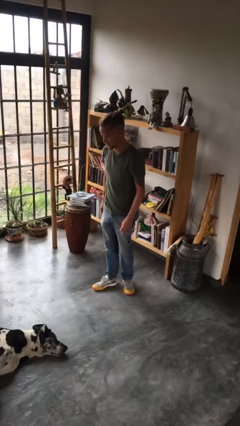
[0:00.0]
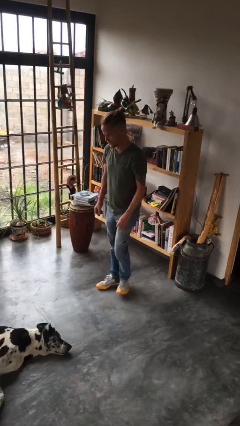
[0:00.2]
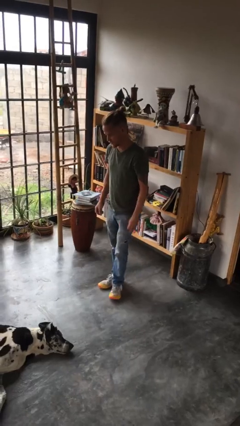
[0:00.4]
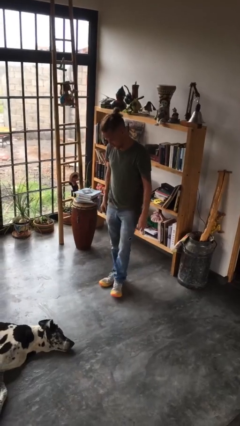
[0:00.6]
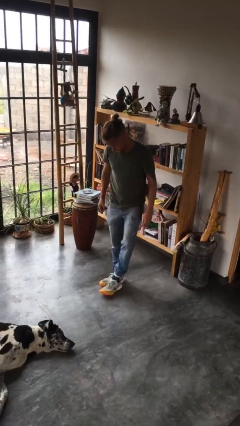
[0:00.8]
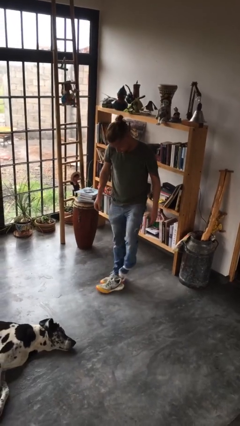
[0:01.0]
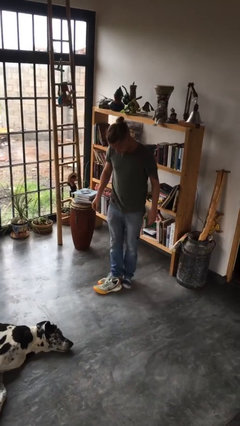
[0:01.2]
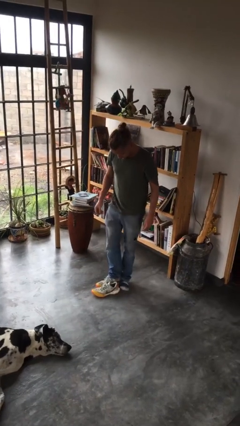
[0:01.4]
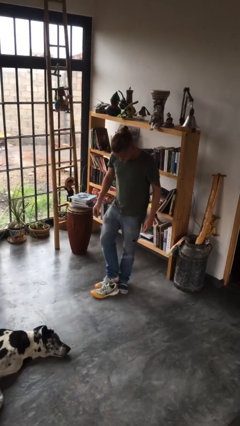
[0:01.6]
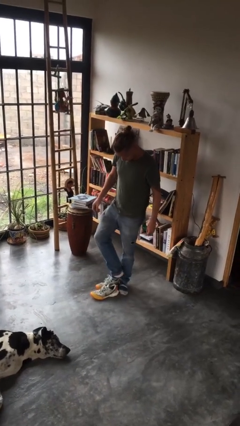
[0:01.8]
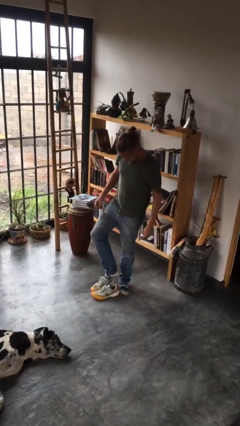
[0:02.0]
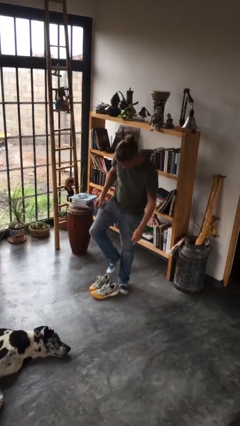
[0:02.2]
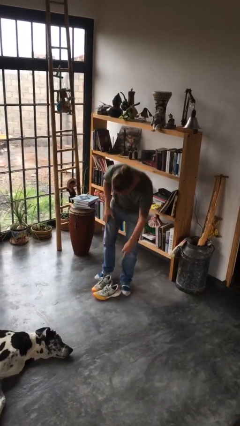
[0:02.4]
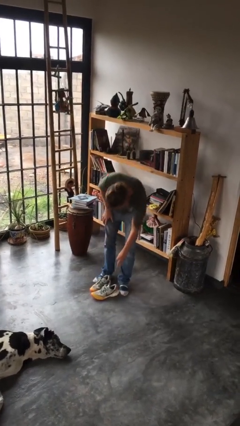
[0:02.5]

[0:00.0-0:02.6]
person takes off shoes

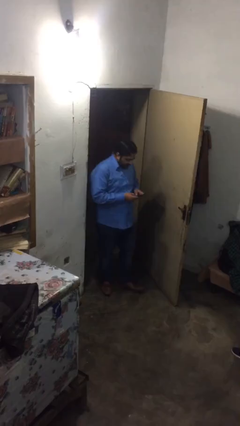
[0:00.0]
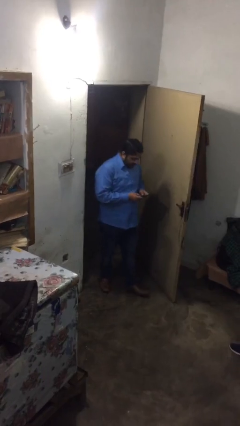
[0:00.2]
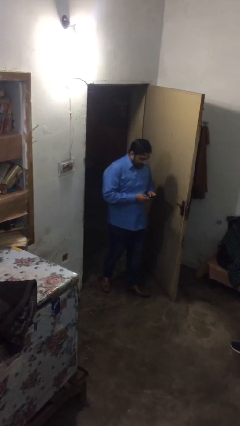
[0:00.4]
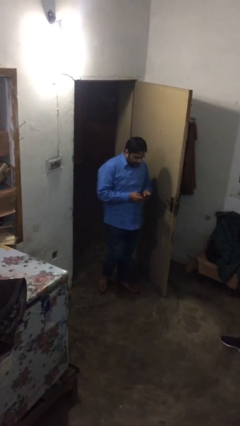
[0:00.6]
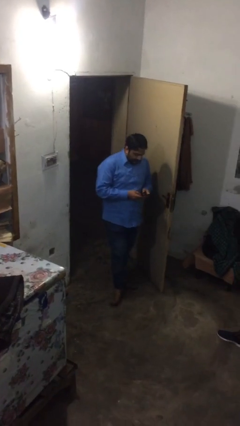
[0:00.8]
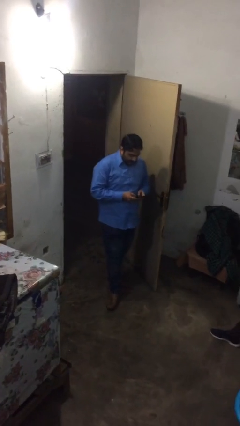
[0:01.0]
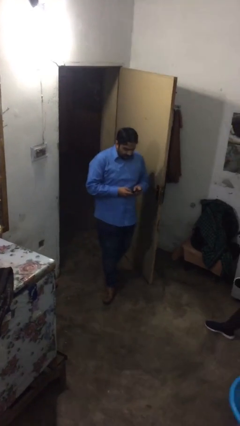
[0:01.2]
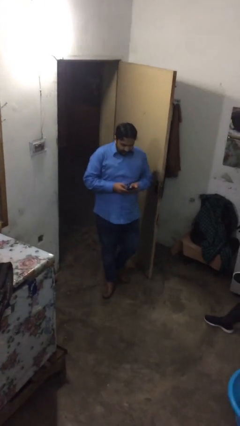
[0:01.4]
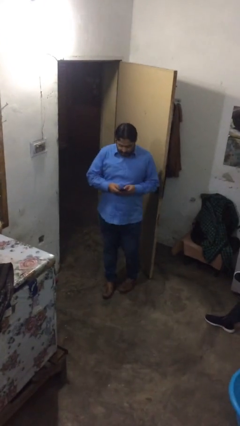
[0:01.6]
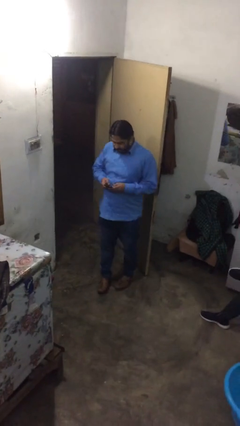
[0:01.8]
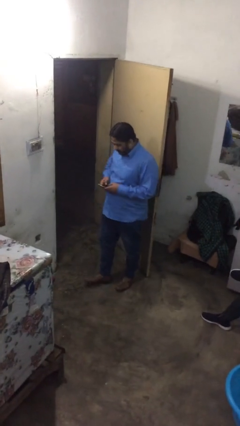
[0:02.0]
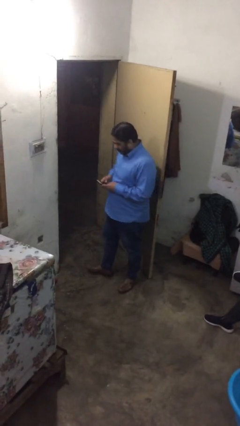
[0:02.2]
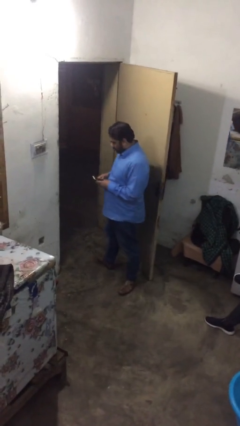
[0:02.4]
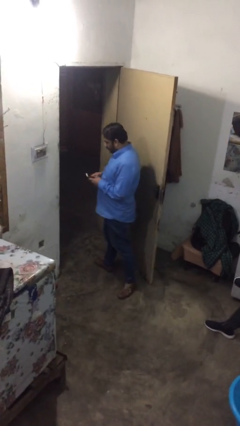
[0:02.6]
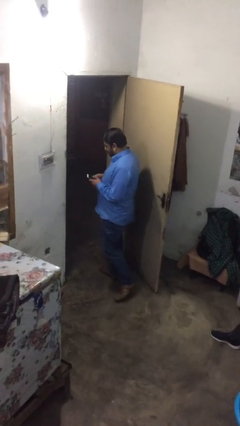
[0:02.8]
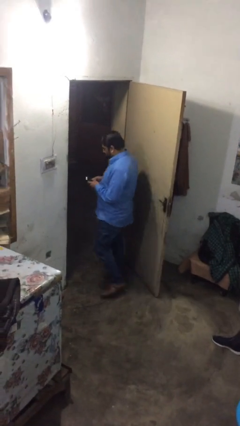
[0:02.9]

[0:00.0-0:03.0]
person exits scene through structure

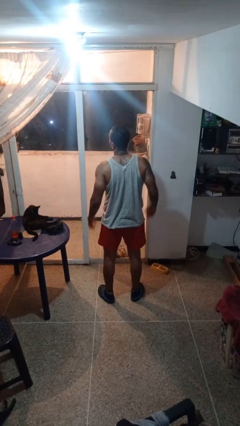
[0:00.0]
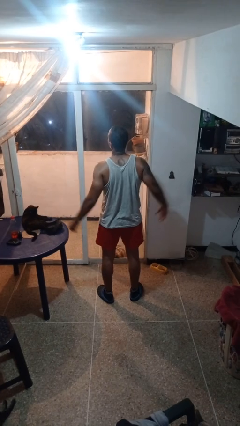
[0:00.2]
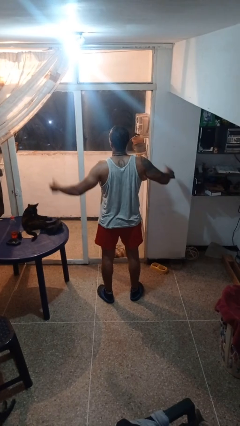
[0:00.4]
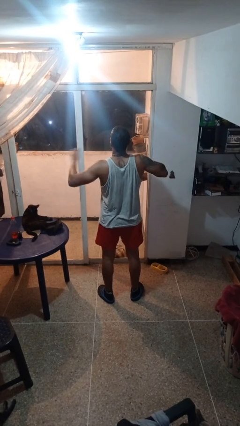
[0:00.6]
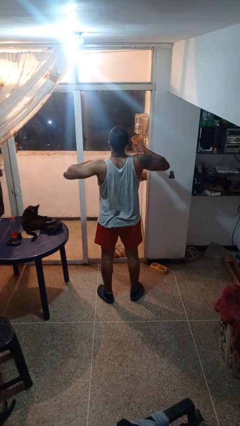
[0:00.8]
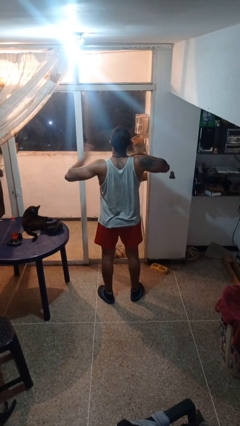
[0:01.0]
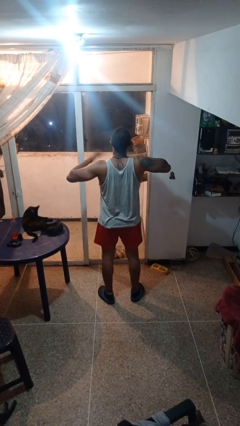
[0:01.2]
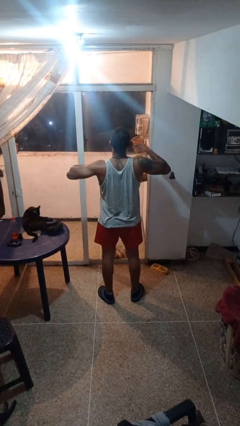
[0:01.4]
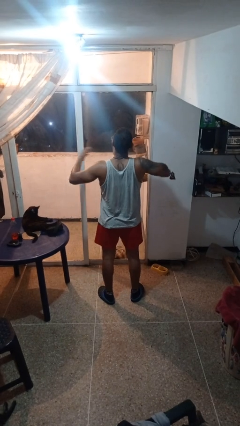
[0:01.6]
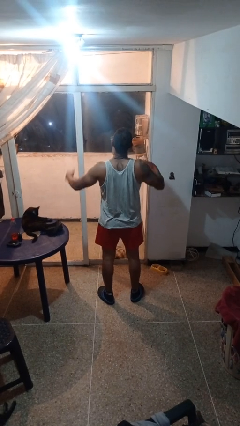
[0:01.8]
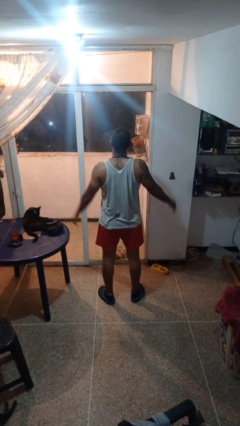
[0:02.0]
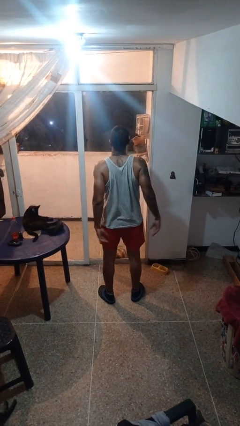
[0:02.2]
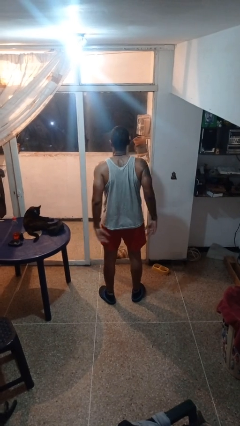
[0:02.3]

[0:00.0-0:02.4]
person drums on chest

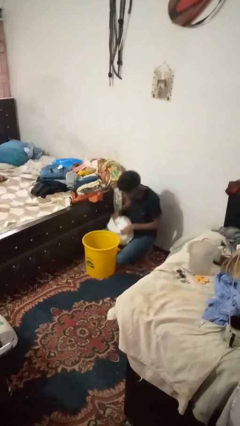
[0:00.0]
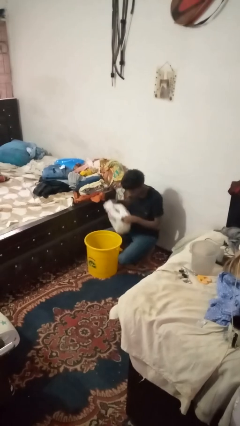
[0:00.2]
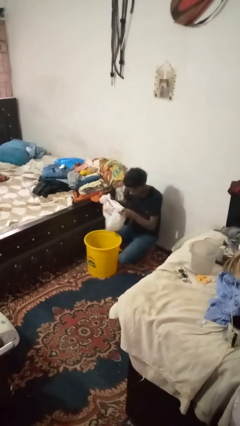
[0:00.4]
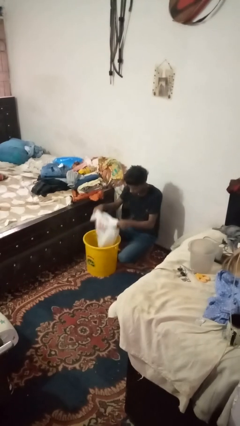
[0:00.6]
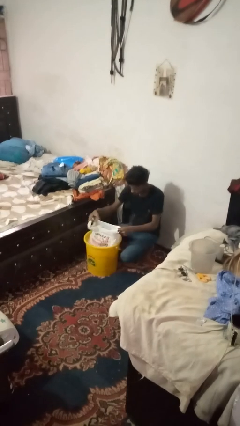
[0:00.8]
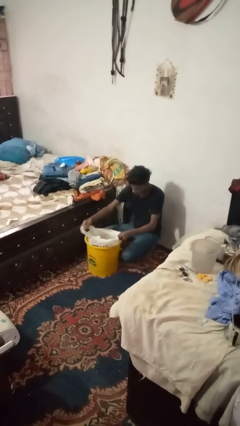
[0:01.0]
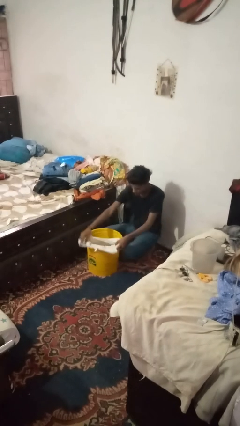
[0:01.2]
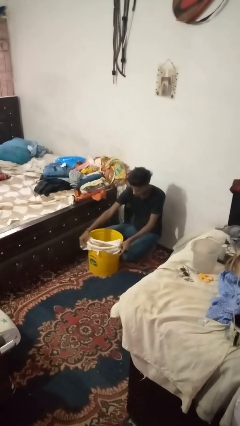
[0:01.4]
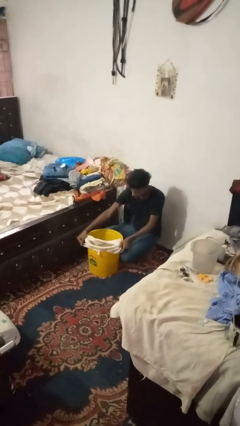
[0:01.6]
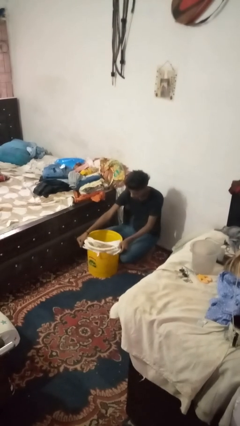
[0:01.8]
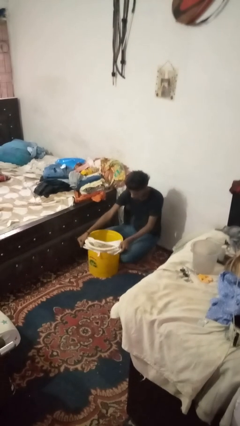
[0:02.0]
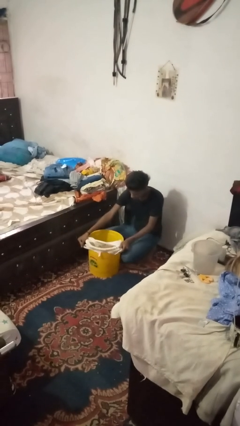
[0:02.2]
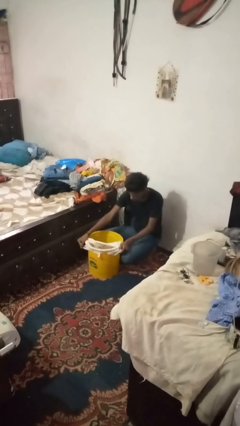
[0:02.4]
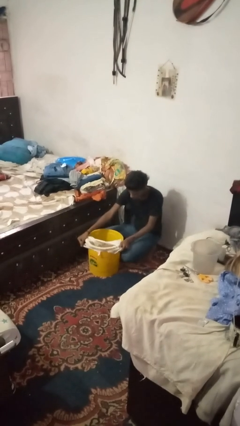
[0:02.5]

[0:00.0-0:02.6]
person inserts trashbag into trashcan

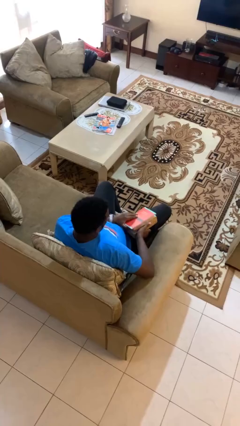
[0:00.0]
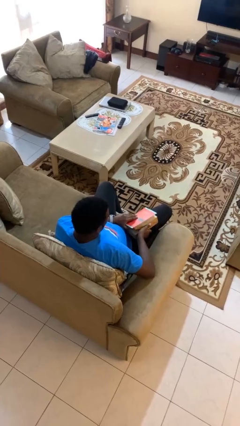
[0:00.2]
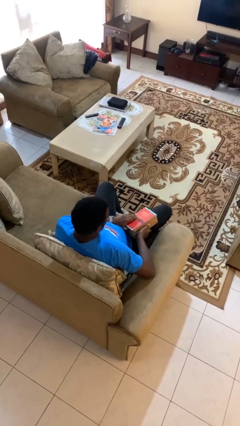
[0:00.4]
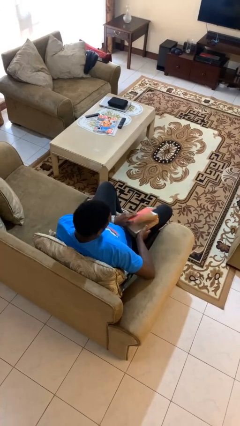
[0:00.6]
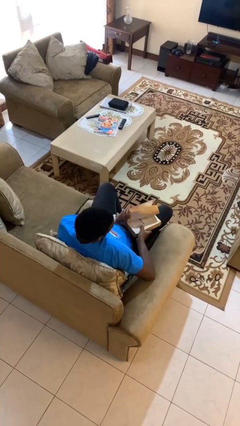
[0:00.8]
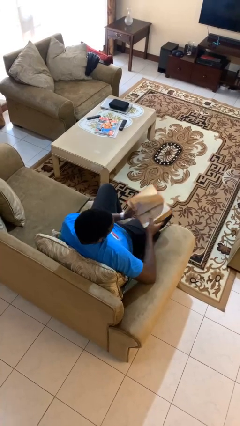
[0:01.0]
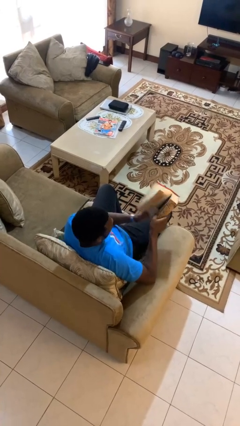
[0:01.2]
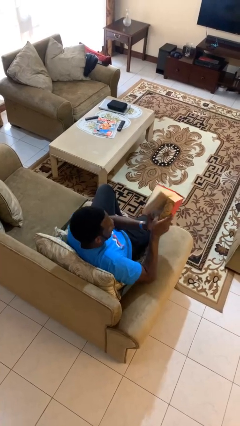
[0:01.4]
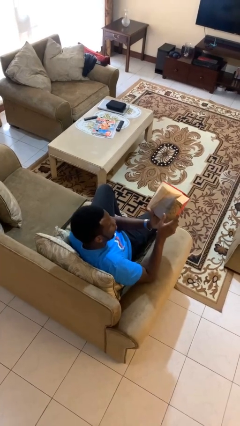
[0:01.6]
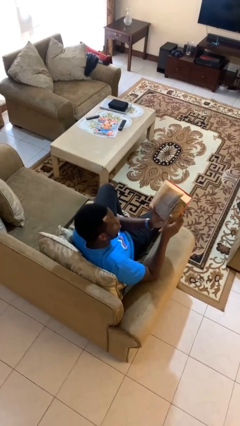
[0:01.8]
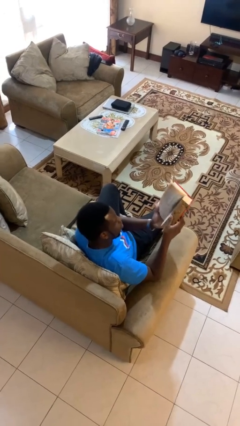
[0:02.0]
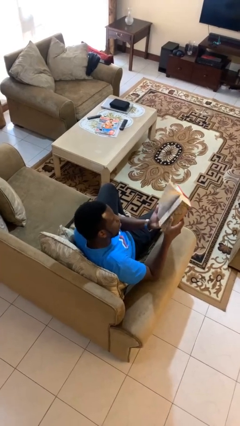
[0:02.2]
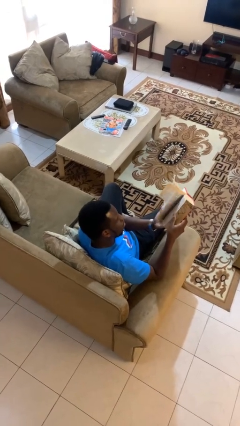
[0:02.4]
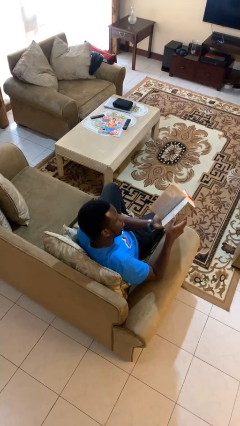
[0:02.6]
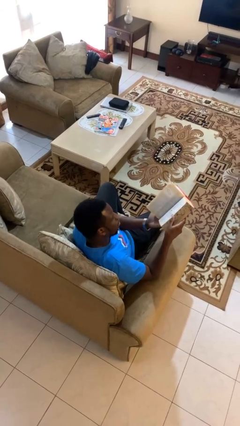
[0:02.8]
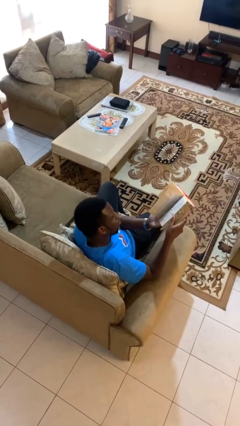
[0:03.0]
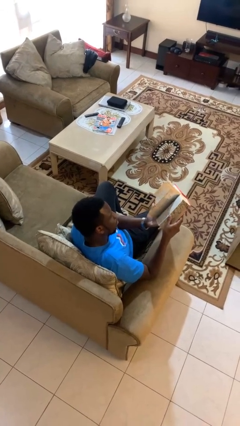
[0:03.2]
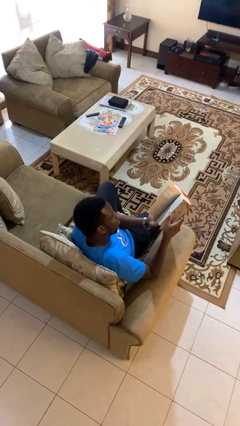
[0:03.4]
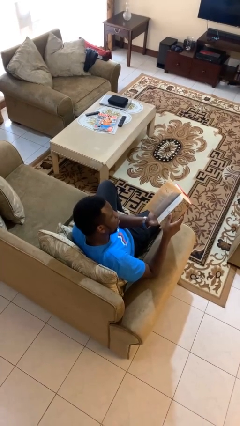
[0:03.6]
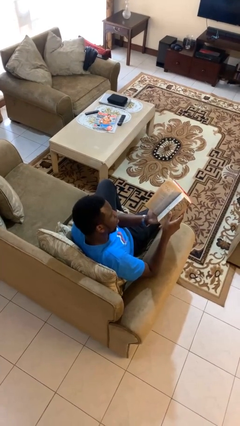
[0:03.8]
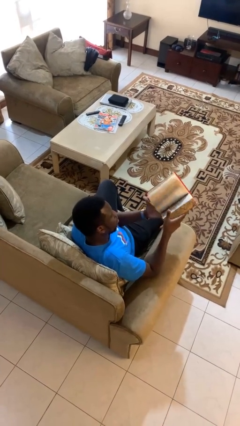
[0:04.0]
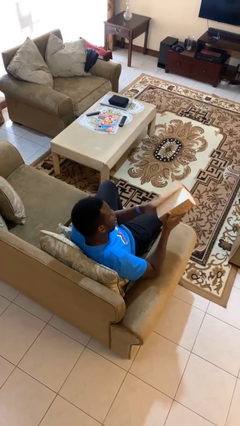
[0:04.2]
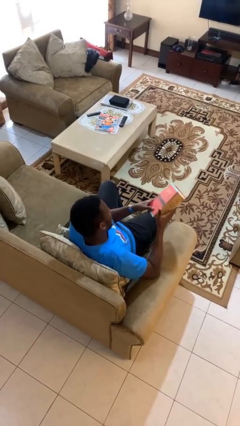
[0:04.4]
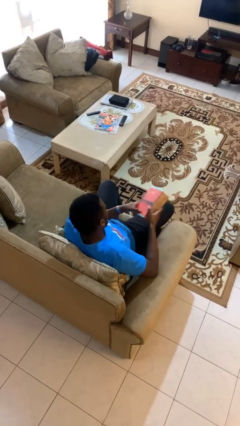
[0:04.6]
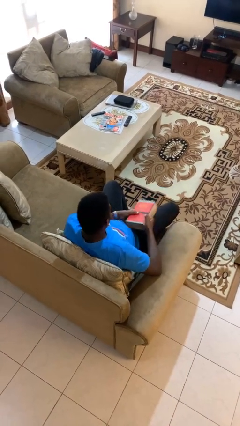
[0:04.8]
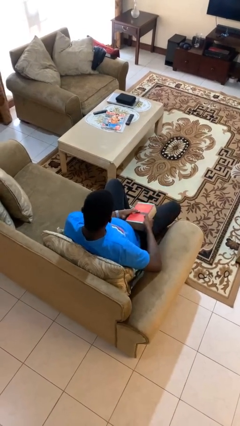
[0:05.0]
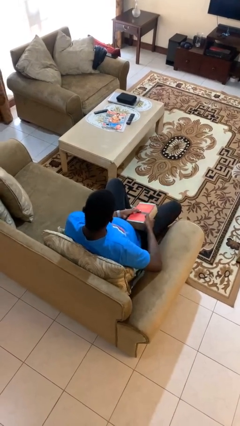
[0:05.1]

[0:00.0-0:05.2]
person reads book

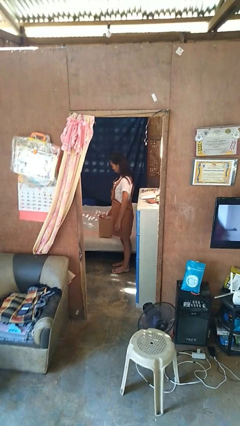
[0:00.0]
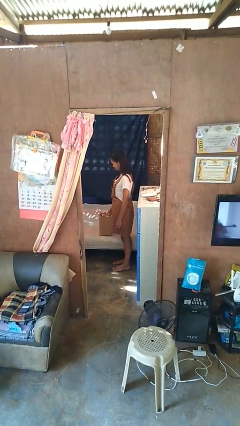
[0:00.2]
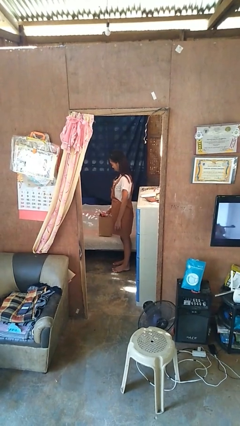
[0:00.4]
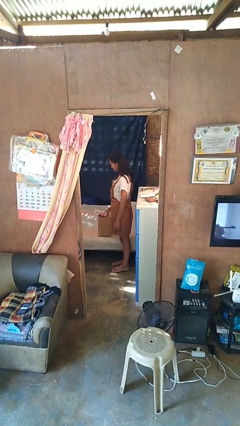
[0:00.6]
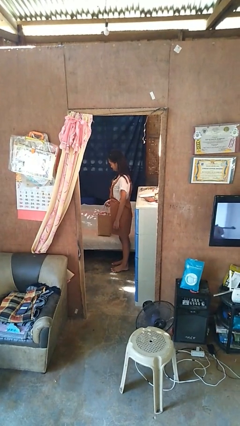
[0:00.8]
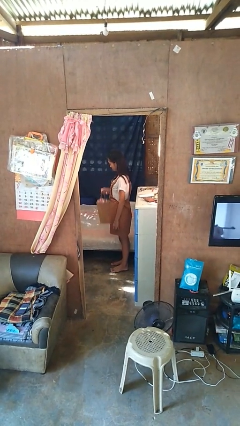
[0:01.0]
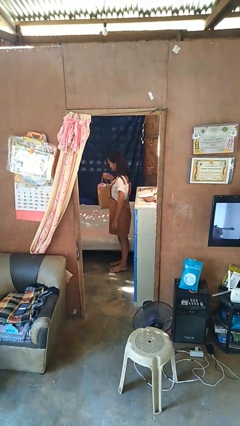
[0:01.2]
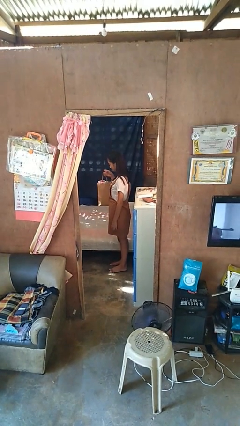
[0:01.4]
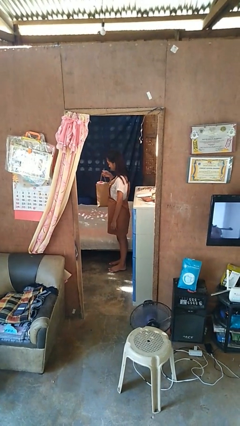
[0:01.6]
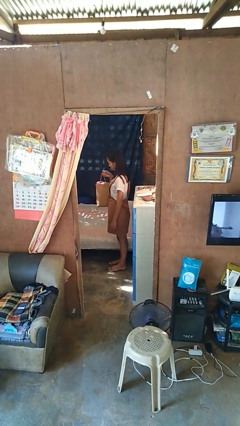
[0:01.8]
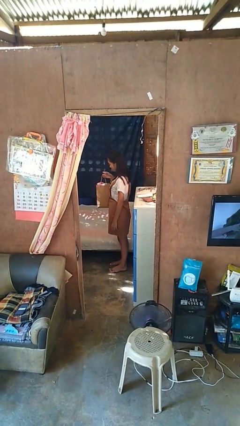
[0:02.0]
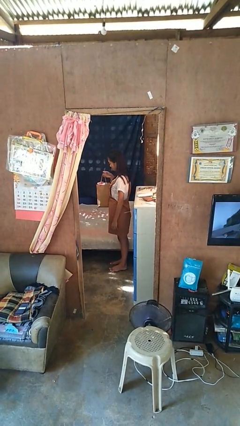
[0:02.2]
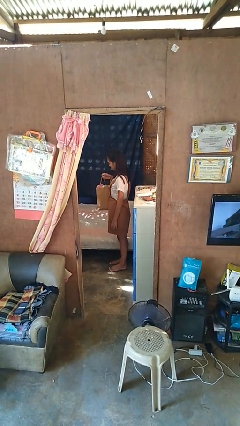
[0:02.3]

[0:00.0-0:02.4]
person picks up object from couch
